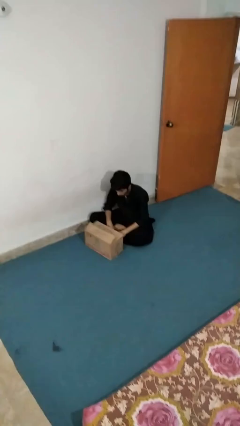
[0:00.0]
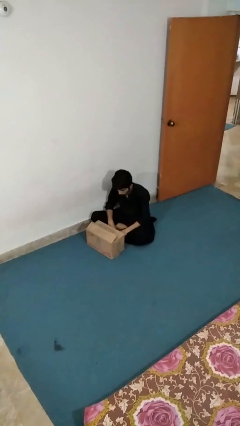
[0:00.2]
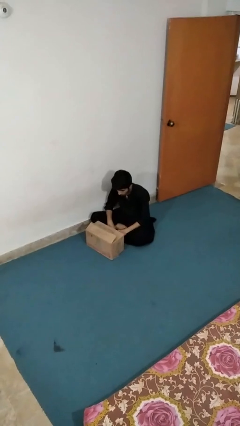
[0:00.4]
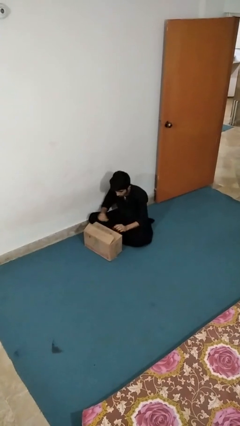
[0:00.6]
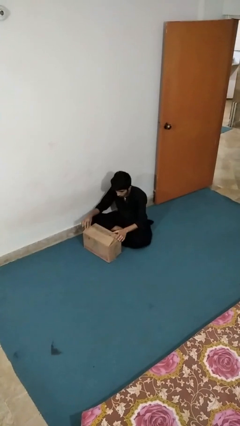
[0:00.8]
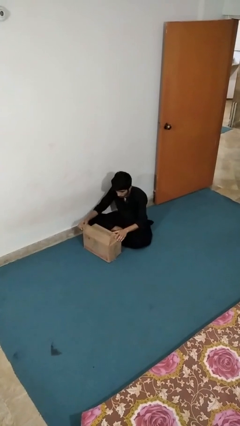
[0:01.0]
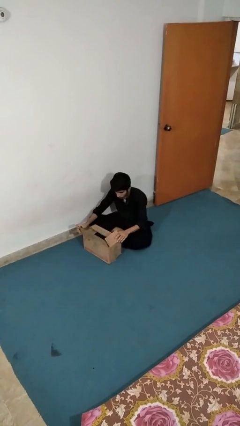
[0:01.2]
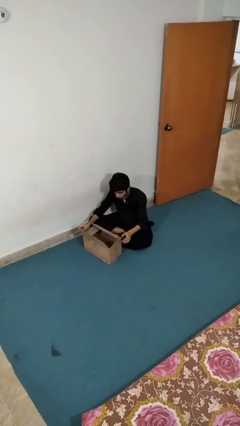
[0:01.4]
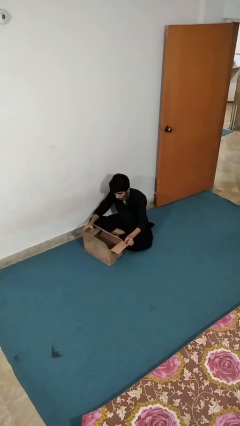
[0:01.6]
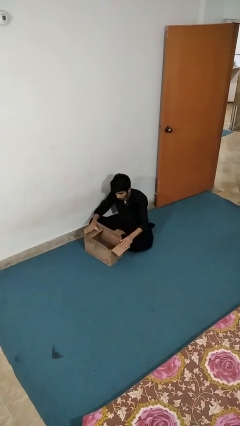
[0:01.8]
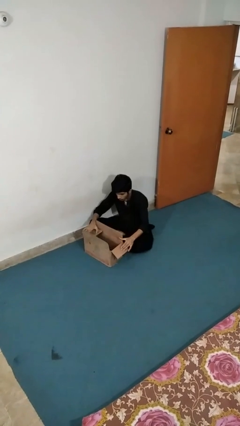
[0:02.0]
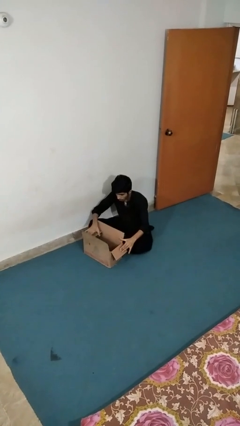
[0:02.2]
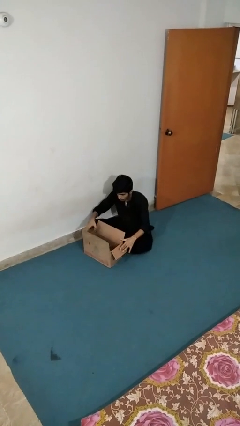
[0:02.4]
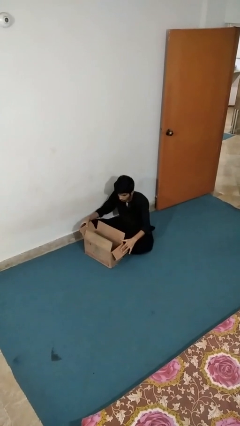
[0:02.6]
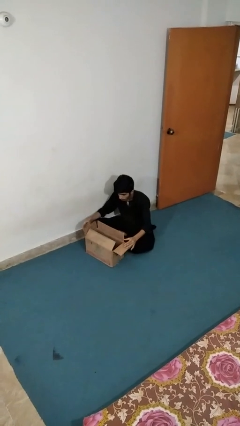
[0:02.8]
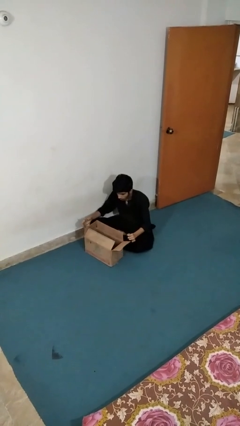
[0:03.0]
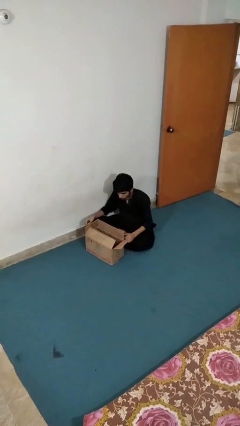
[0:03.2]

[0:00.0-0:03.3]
person opens box

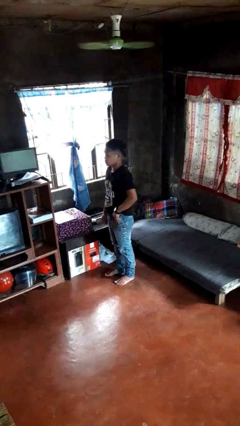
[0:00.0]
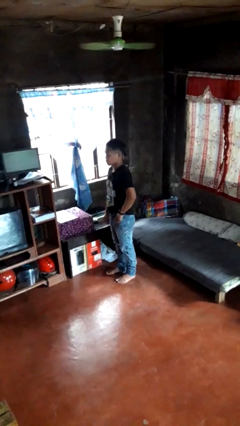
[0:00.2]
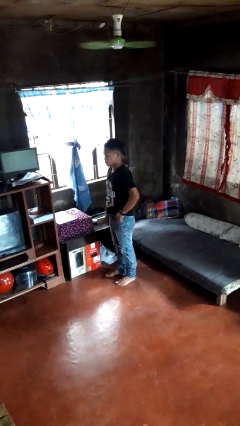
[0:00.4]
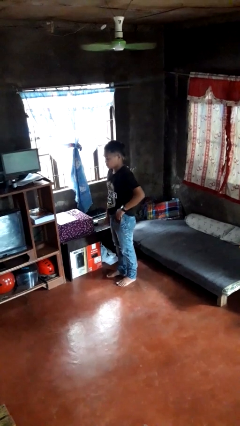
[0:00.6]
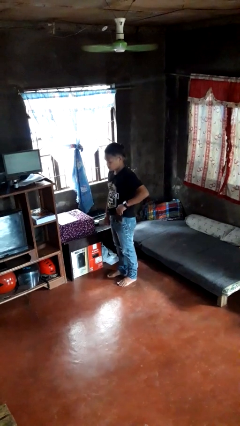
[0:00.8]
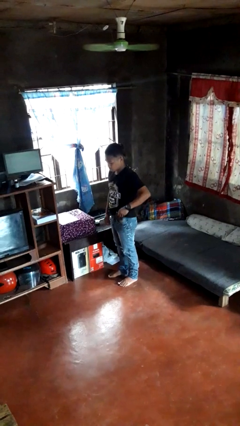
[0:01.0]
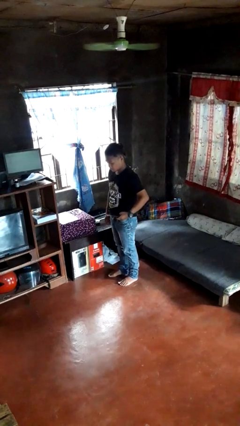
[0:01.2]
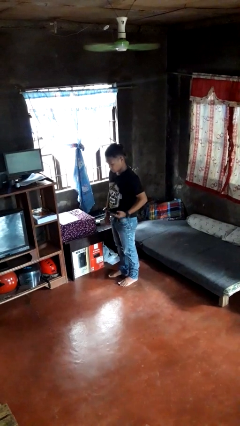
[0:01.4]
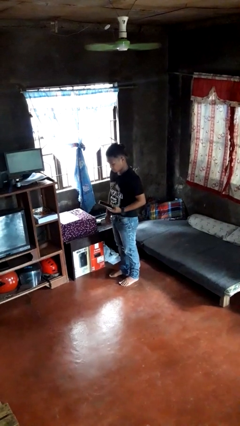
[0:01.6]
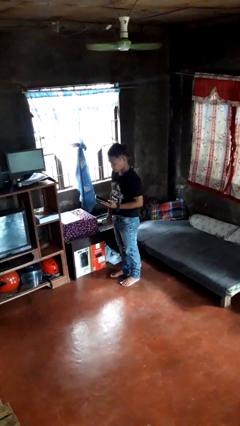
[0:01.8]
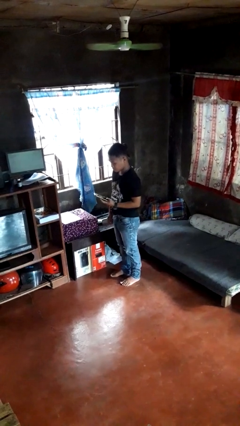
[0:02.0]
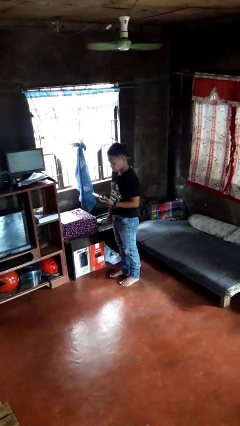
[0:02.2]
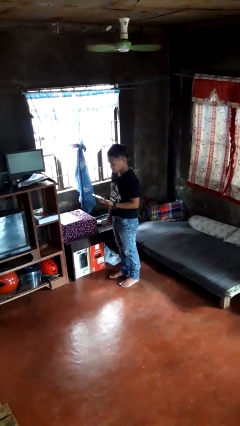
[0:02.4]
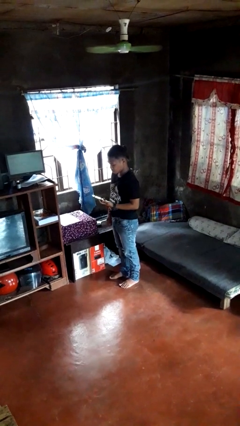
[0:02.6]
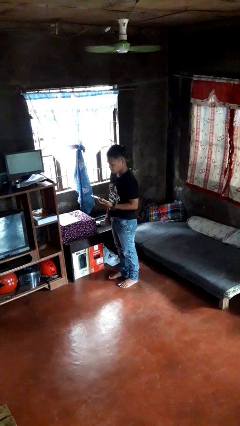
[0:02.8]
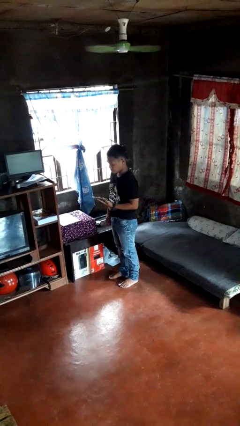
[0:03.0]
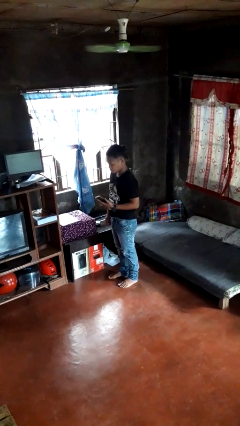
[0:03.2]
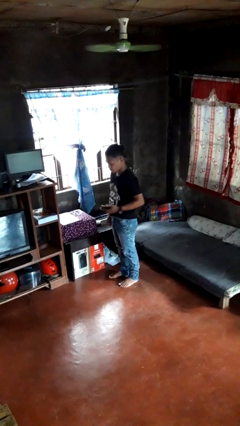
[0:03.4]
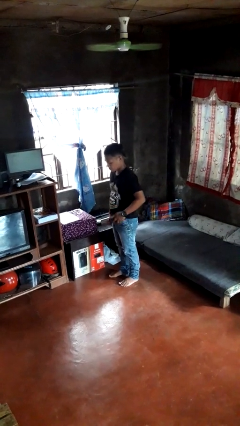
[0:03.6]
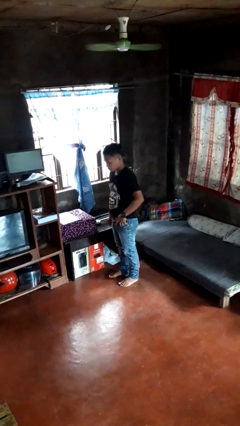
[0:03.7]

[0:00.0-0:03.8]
person takes phone from pocket

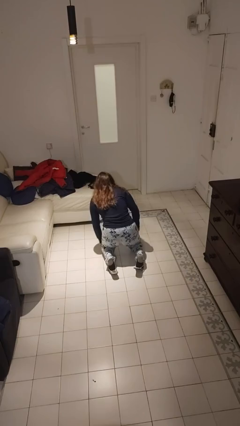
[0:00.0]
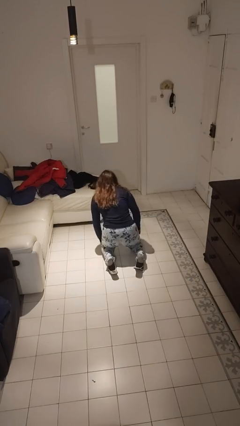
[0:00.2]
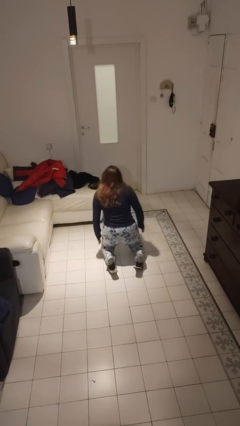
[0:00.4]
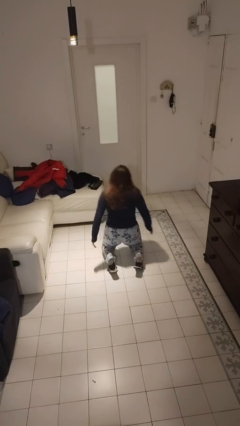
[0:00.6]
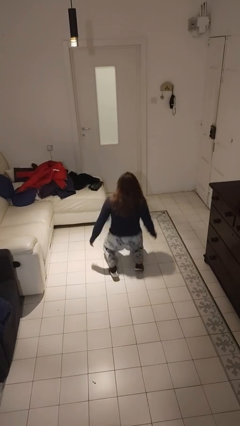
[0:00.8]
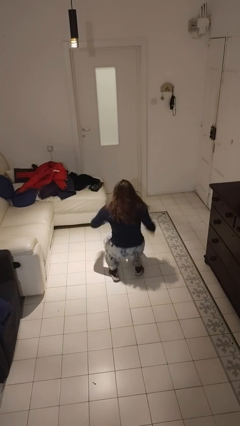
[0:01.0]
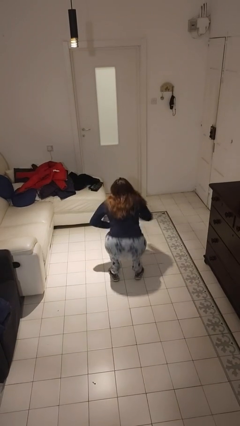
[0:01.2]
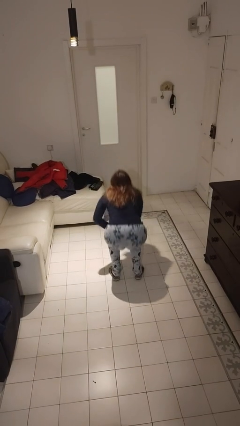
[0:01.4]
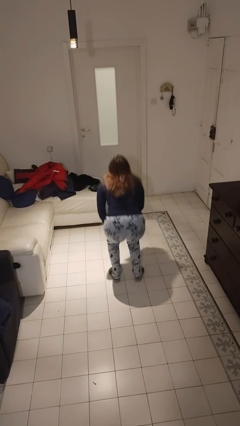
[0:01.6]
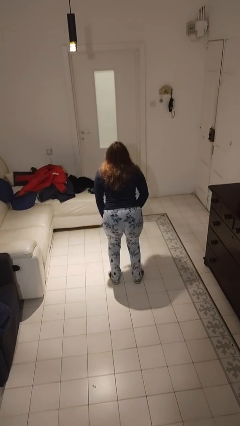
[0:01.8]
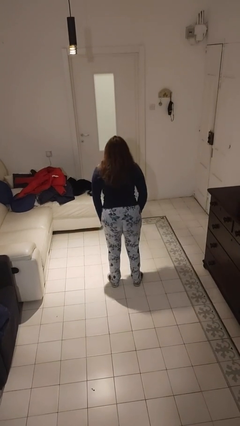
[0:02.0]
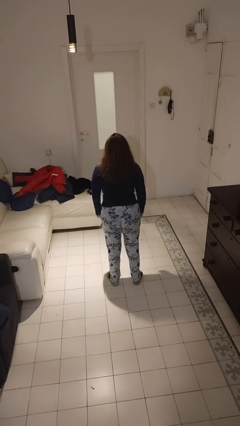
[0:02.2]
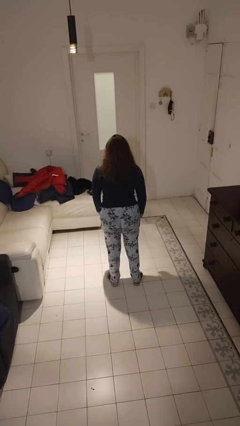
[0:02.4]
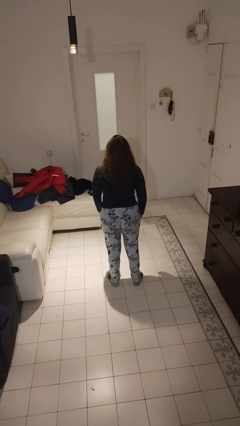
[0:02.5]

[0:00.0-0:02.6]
person stands up from floor

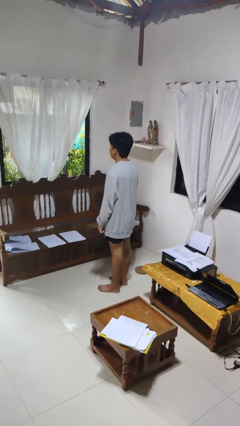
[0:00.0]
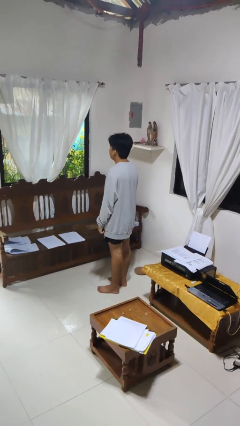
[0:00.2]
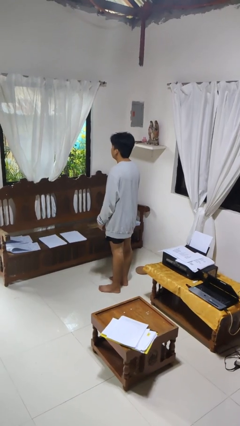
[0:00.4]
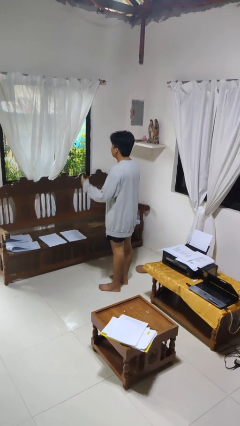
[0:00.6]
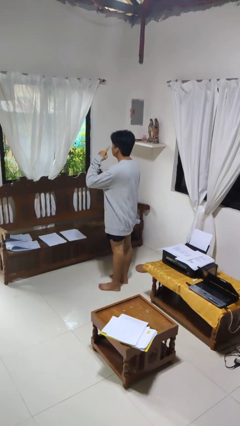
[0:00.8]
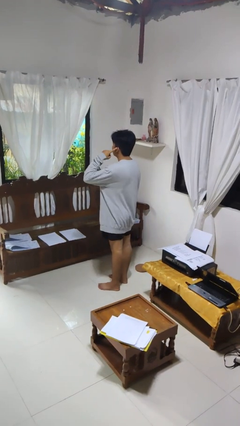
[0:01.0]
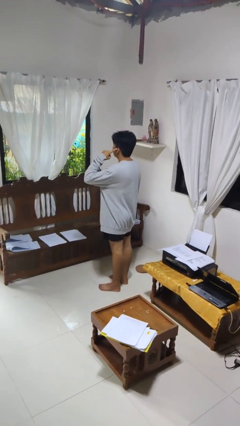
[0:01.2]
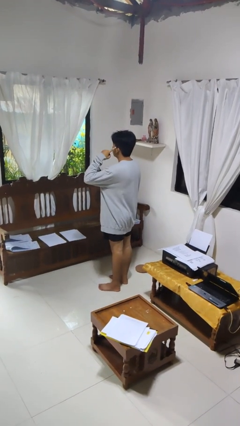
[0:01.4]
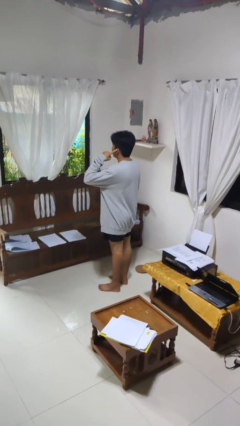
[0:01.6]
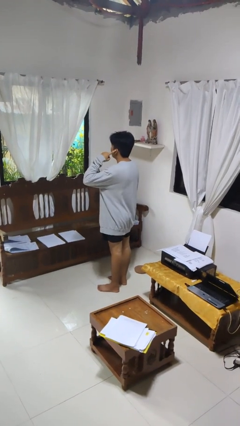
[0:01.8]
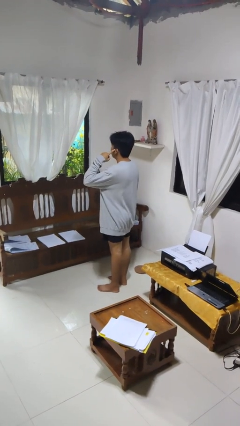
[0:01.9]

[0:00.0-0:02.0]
person gestures listen closely

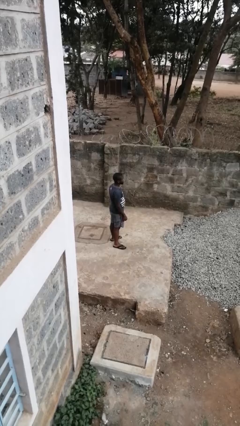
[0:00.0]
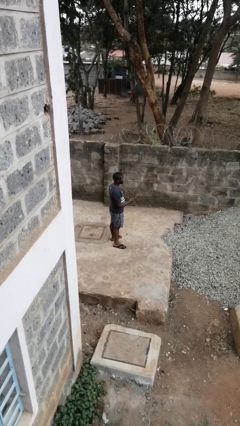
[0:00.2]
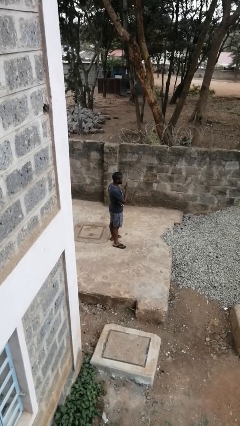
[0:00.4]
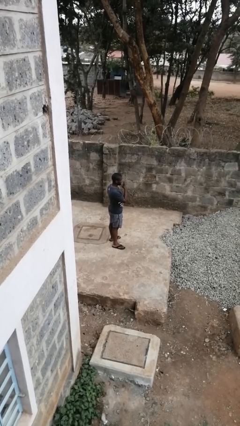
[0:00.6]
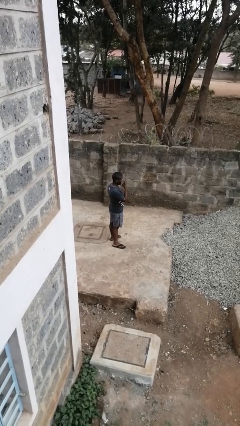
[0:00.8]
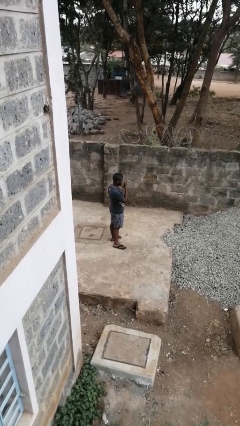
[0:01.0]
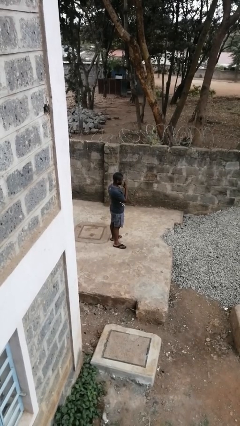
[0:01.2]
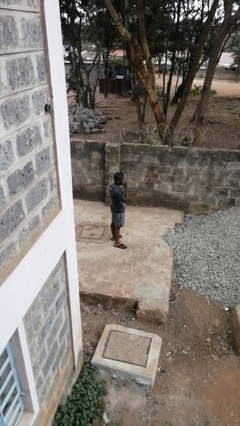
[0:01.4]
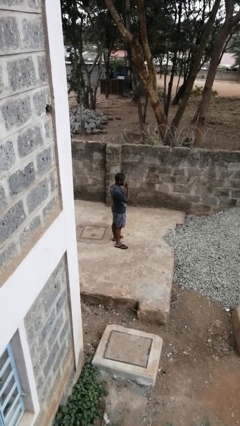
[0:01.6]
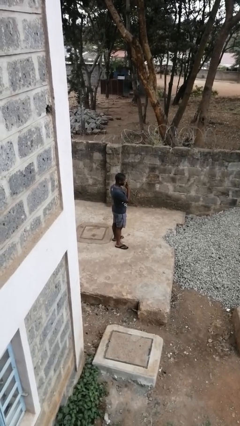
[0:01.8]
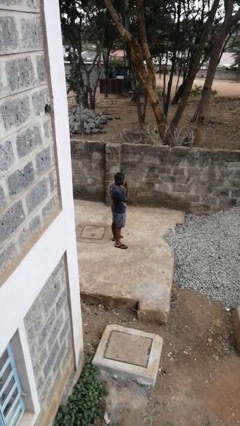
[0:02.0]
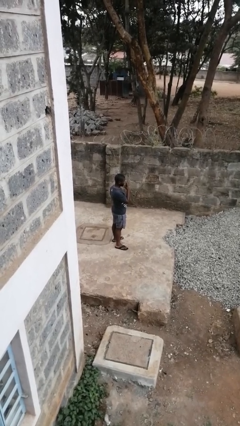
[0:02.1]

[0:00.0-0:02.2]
person gestures watch closely

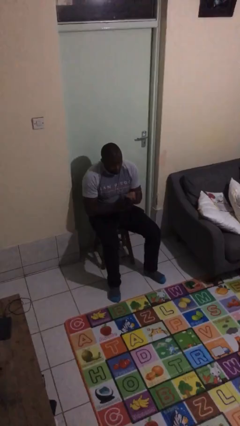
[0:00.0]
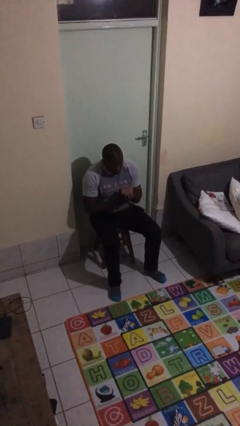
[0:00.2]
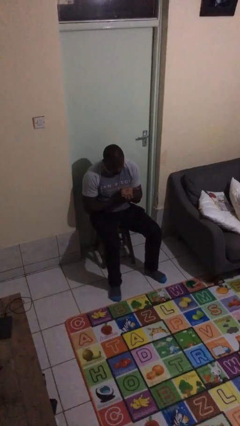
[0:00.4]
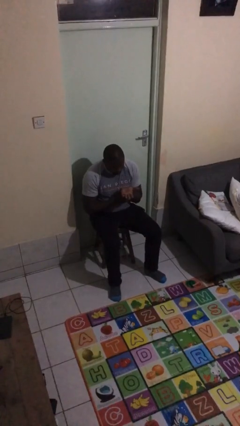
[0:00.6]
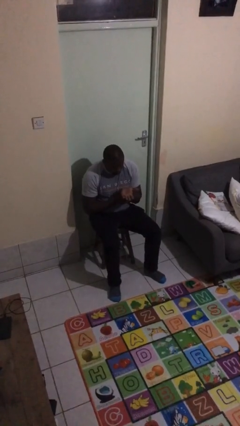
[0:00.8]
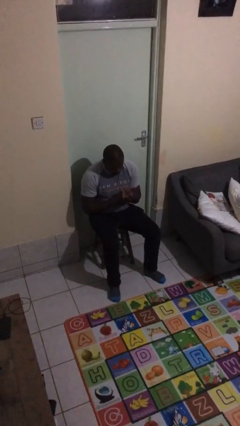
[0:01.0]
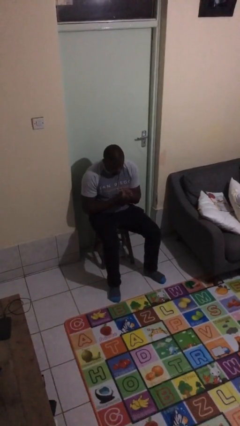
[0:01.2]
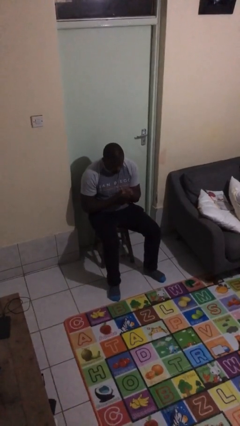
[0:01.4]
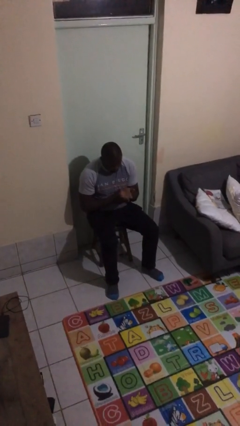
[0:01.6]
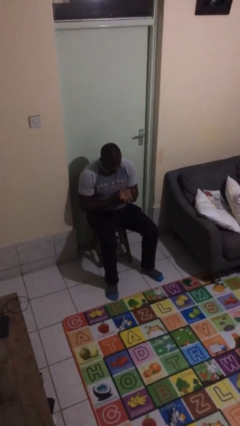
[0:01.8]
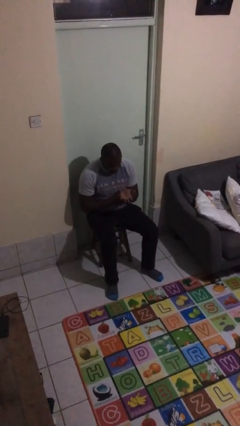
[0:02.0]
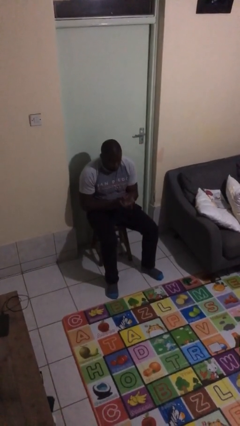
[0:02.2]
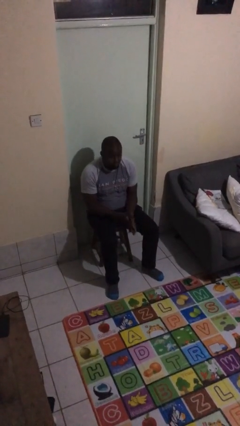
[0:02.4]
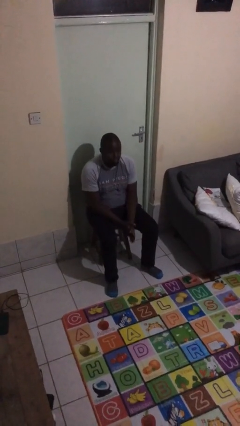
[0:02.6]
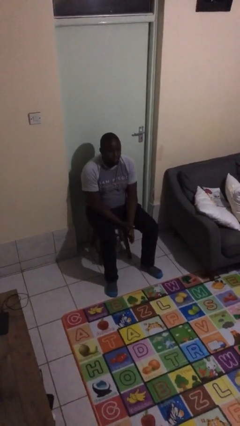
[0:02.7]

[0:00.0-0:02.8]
person looks at hands in lap

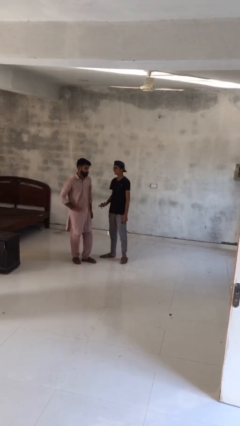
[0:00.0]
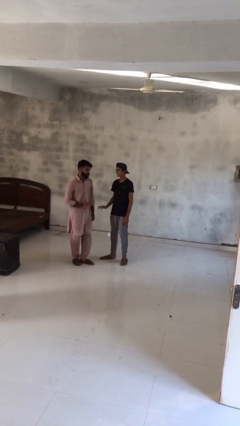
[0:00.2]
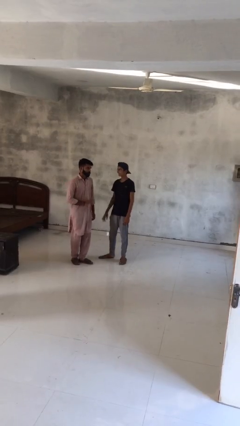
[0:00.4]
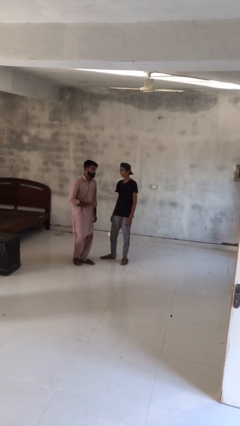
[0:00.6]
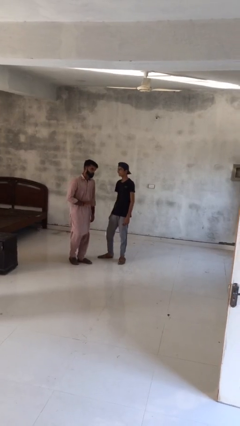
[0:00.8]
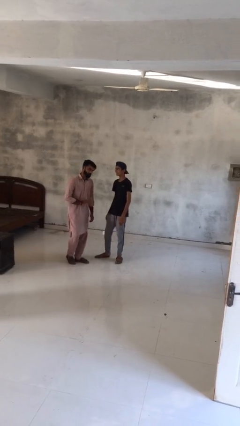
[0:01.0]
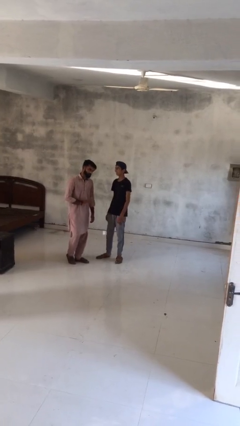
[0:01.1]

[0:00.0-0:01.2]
person talks to person
